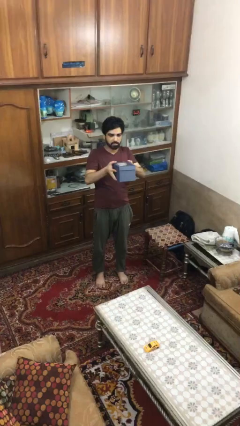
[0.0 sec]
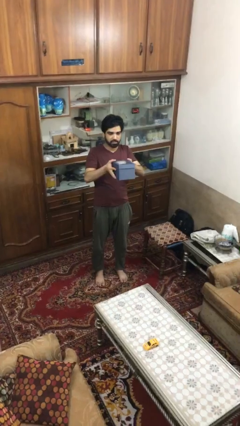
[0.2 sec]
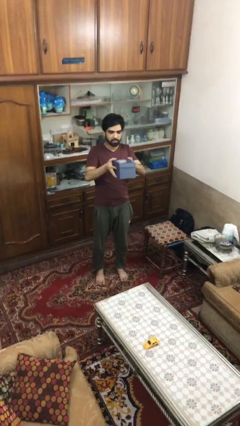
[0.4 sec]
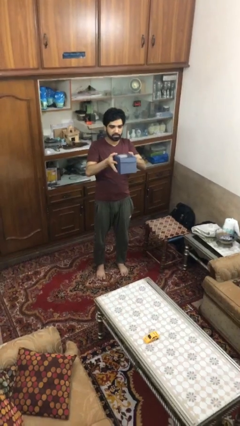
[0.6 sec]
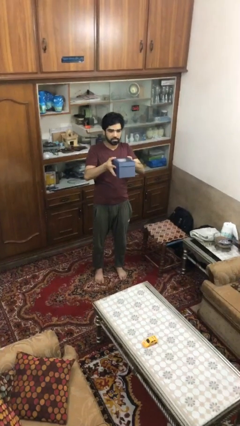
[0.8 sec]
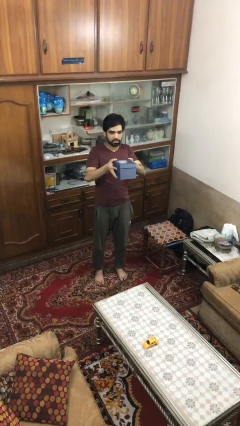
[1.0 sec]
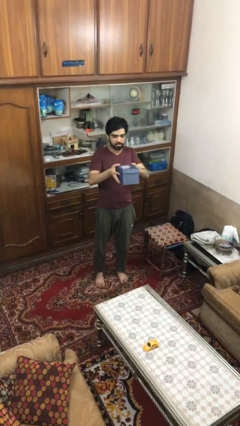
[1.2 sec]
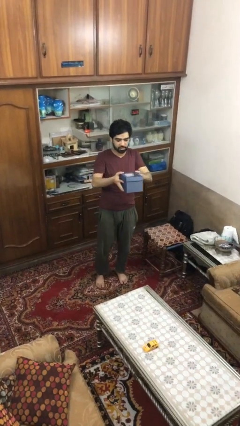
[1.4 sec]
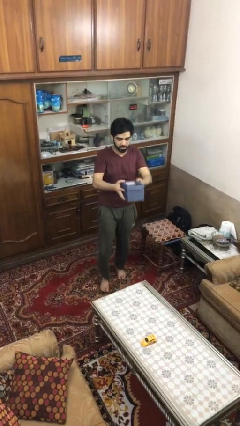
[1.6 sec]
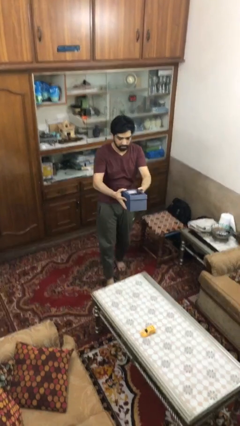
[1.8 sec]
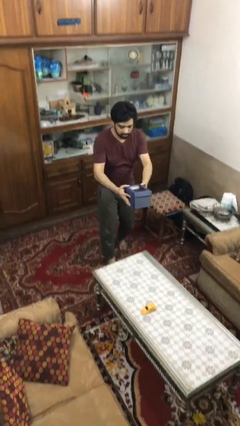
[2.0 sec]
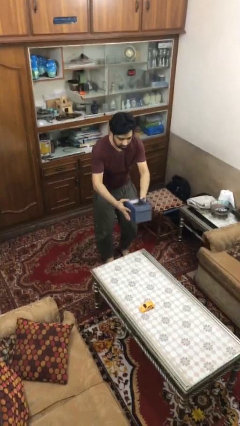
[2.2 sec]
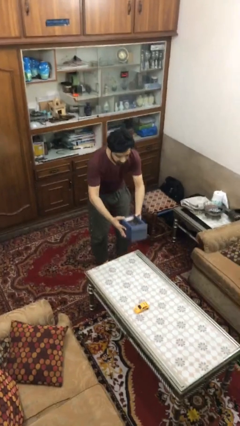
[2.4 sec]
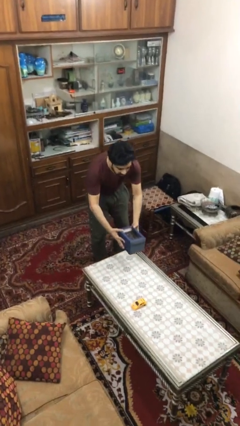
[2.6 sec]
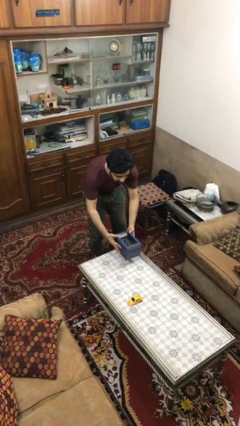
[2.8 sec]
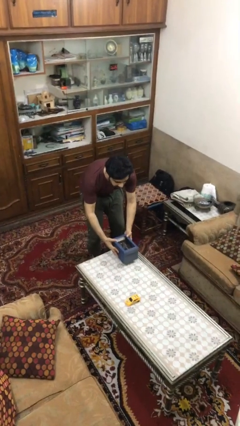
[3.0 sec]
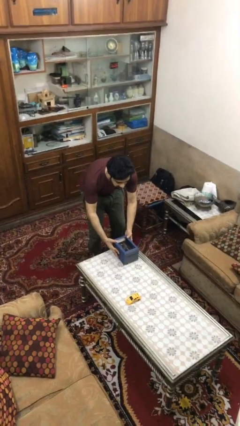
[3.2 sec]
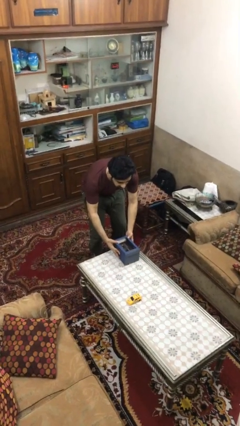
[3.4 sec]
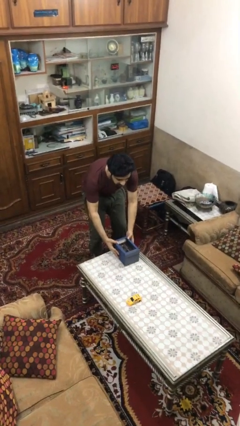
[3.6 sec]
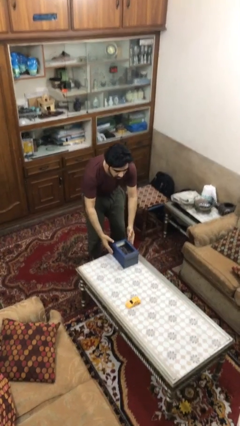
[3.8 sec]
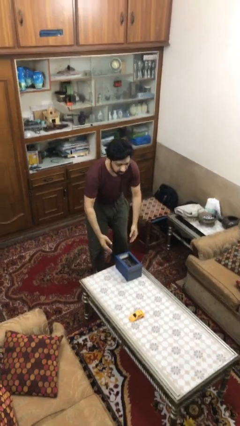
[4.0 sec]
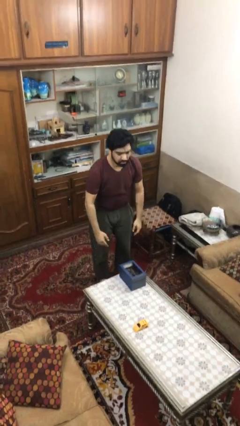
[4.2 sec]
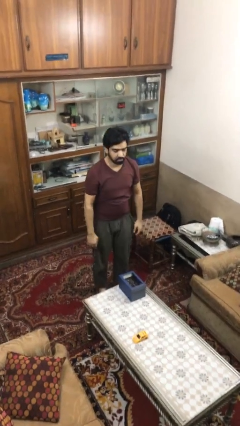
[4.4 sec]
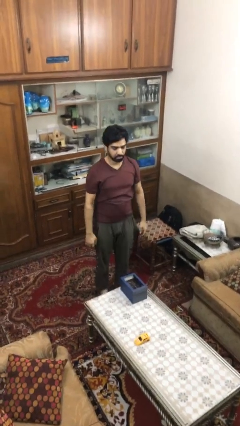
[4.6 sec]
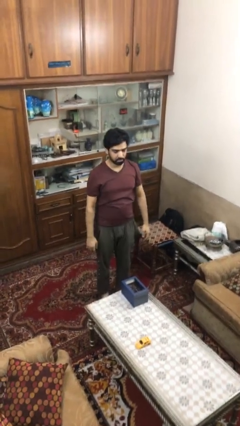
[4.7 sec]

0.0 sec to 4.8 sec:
person puts down object on table

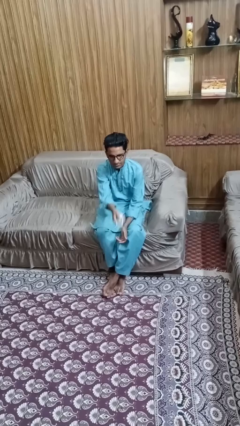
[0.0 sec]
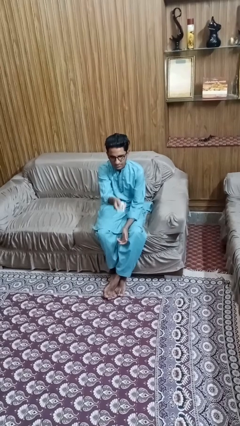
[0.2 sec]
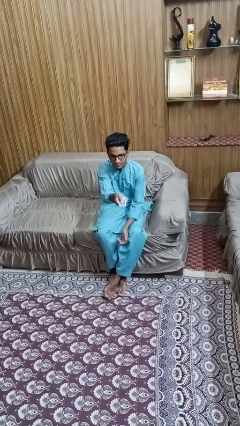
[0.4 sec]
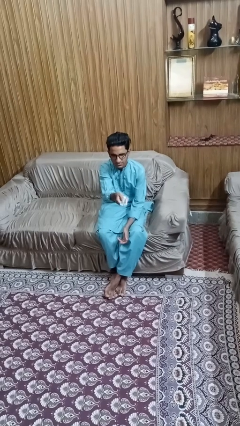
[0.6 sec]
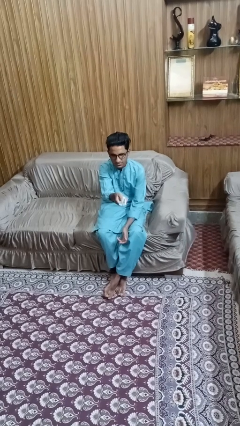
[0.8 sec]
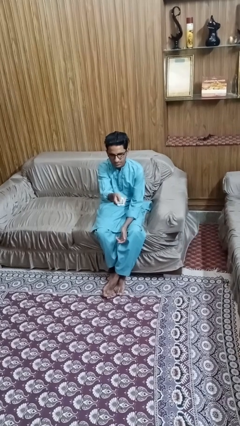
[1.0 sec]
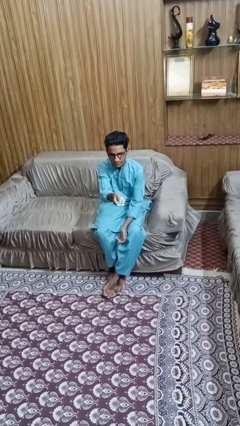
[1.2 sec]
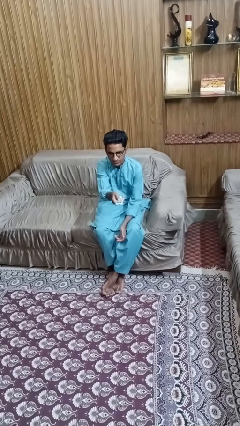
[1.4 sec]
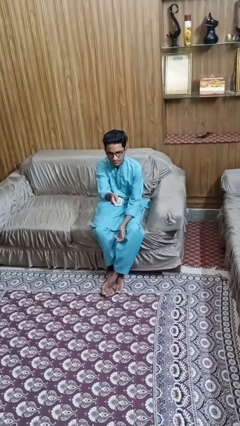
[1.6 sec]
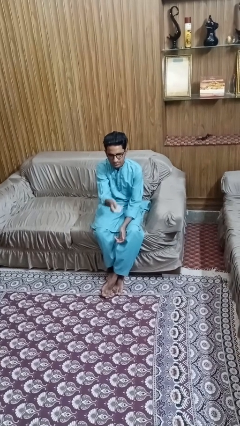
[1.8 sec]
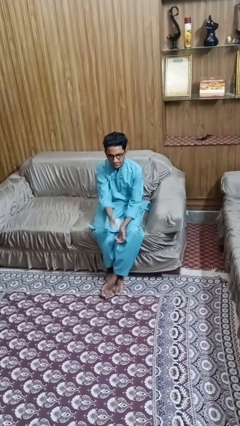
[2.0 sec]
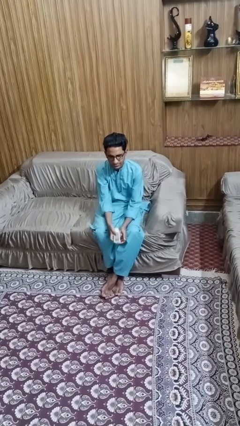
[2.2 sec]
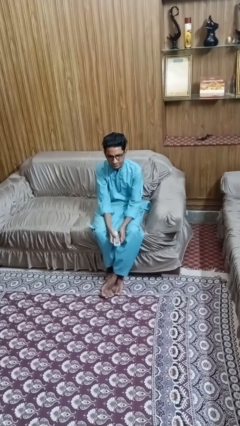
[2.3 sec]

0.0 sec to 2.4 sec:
person uses television remote

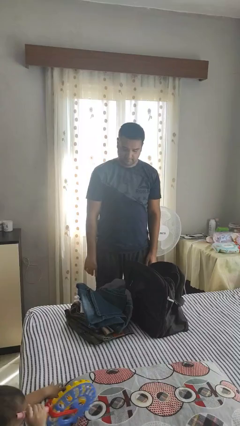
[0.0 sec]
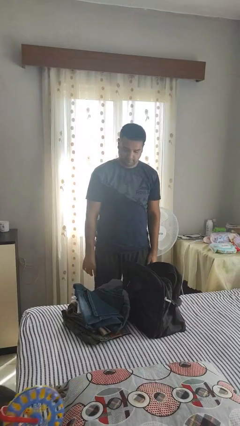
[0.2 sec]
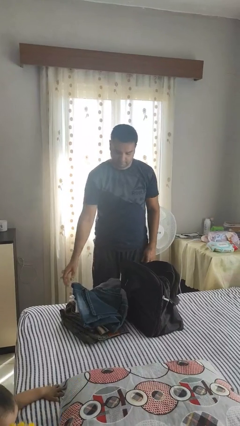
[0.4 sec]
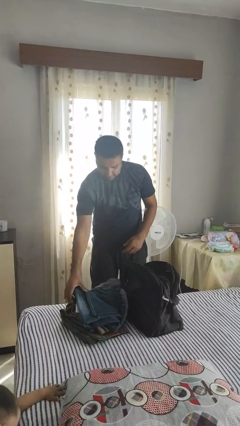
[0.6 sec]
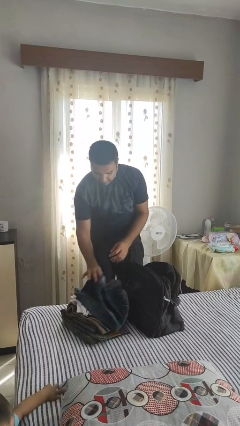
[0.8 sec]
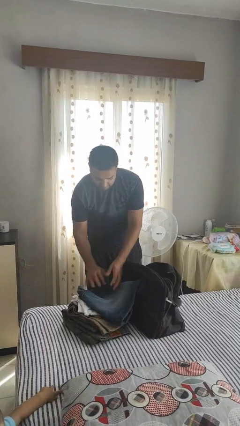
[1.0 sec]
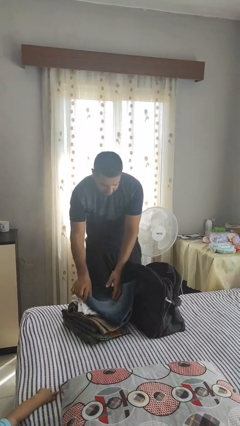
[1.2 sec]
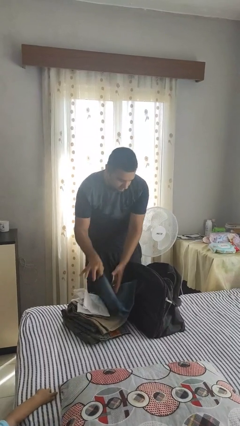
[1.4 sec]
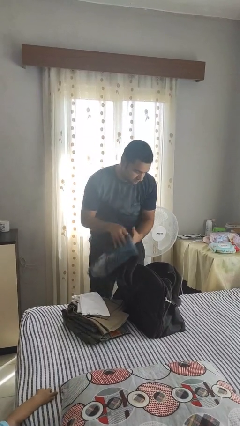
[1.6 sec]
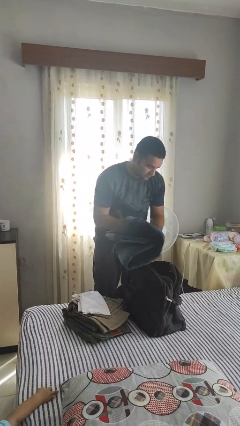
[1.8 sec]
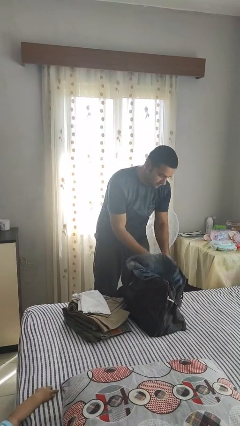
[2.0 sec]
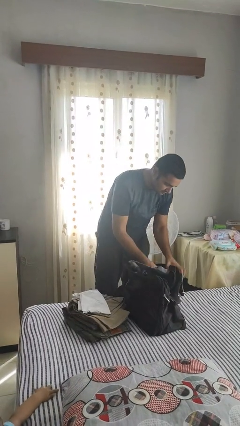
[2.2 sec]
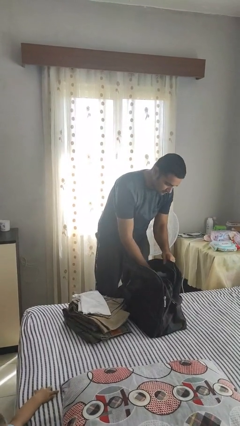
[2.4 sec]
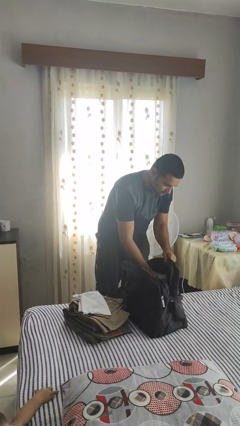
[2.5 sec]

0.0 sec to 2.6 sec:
person loads clothes into suitcase

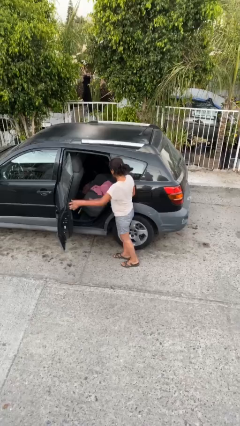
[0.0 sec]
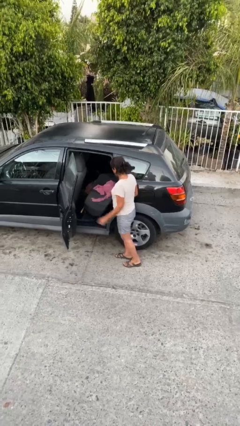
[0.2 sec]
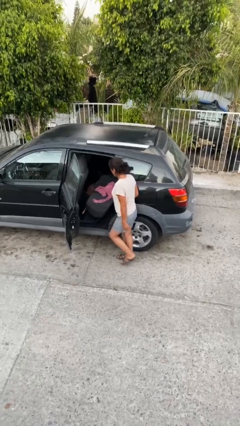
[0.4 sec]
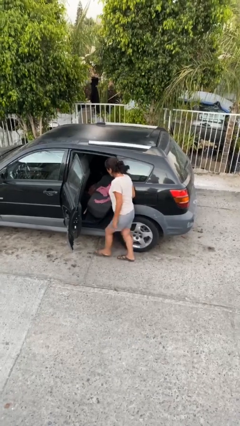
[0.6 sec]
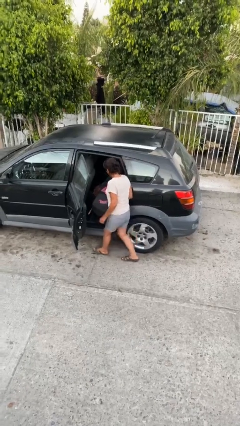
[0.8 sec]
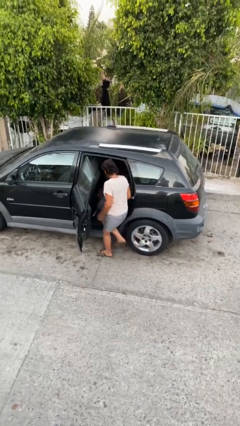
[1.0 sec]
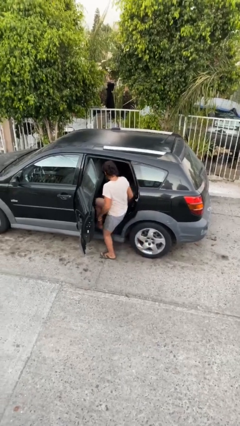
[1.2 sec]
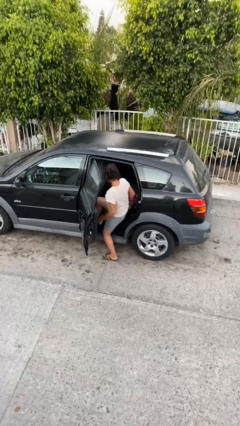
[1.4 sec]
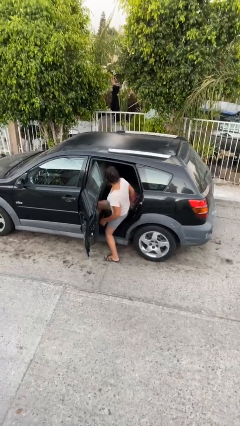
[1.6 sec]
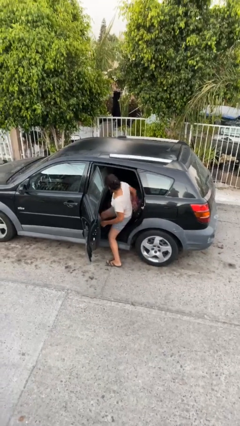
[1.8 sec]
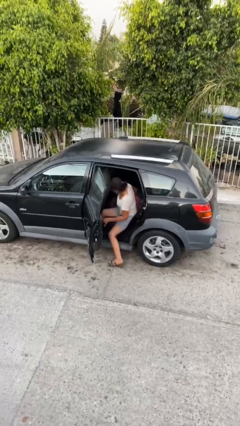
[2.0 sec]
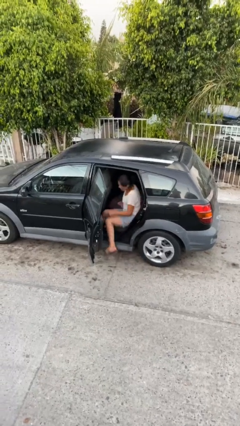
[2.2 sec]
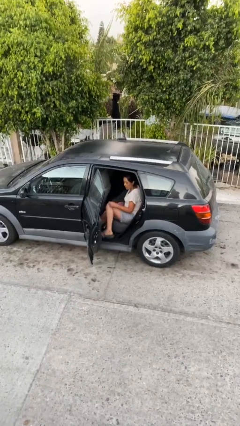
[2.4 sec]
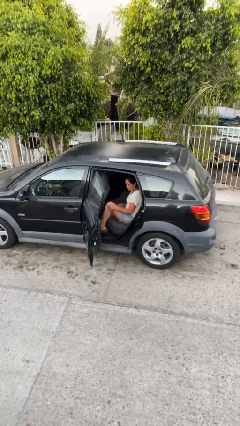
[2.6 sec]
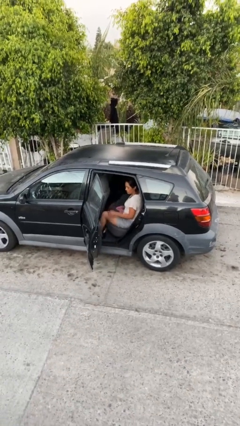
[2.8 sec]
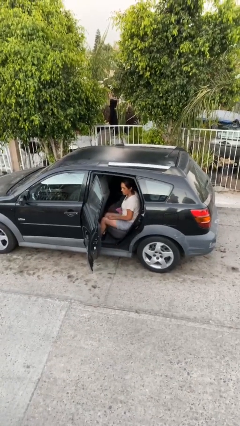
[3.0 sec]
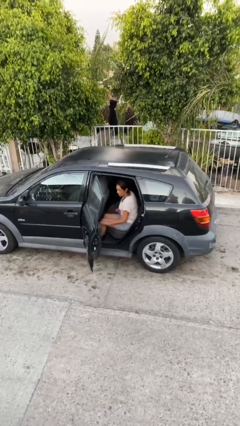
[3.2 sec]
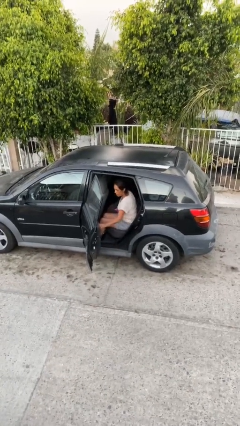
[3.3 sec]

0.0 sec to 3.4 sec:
person enters car

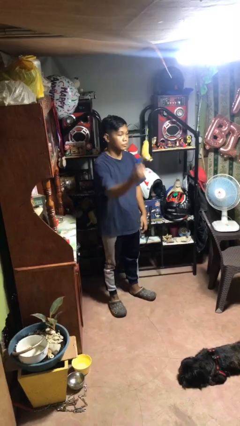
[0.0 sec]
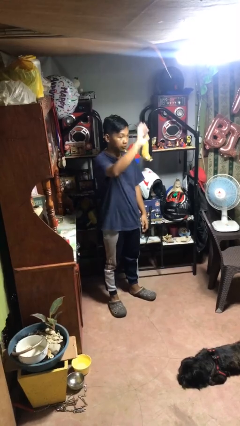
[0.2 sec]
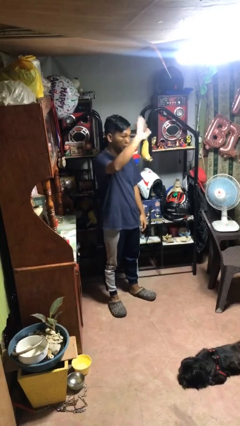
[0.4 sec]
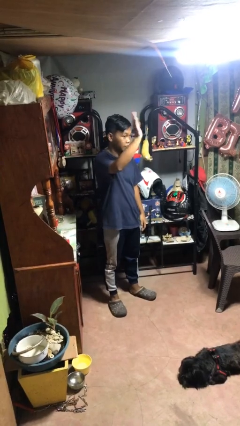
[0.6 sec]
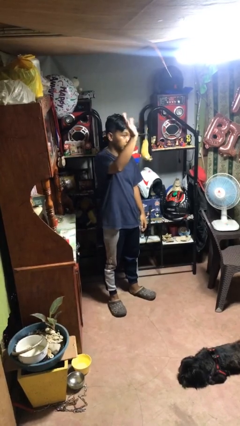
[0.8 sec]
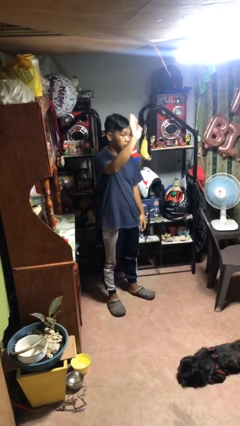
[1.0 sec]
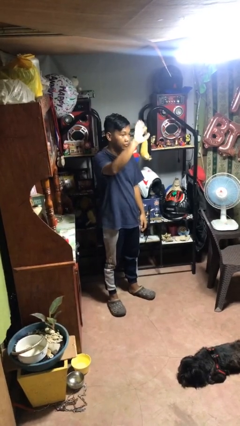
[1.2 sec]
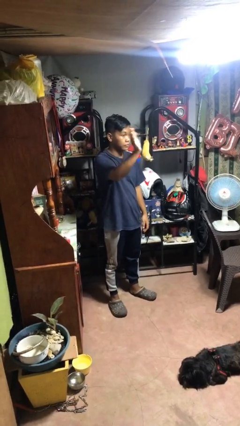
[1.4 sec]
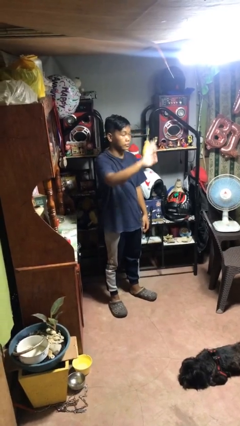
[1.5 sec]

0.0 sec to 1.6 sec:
person waves at person

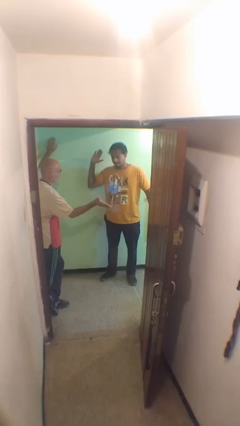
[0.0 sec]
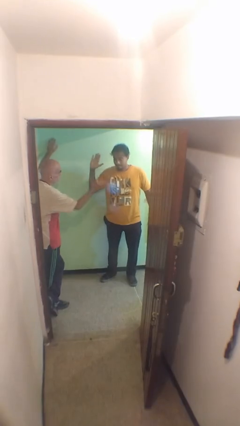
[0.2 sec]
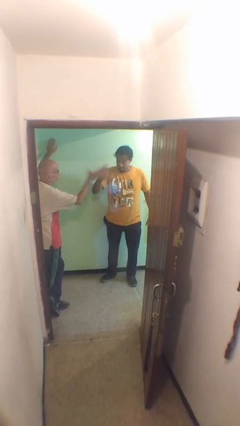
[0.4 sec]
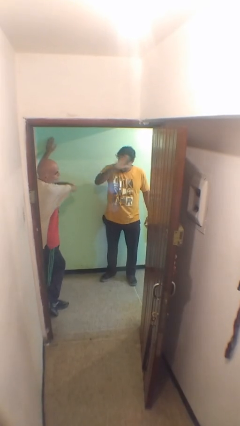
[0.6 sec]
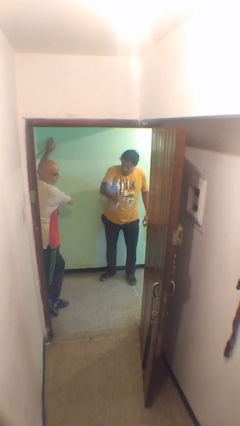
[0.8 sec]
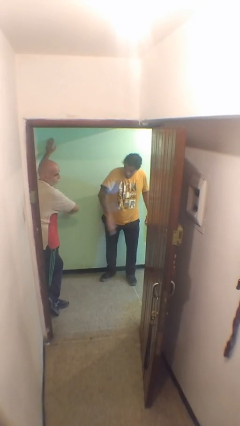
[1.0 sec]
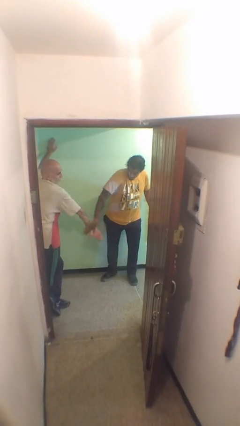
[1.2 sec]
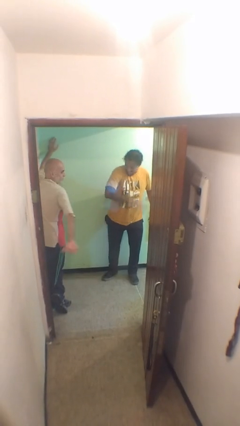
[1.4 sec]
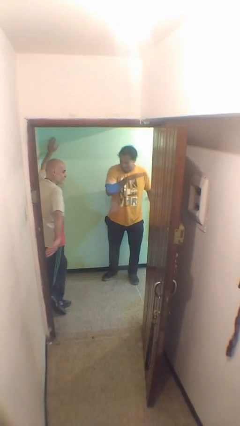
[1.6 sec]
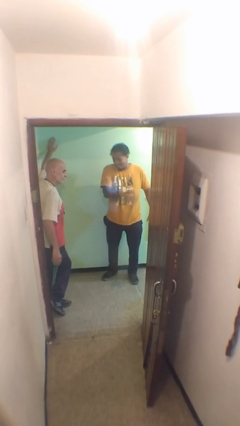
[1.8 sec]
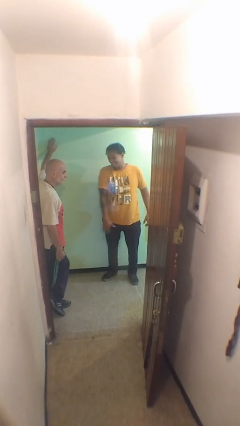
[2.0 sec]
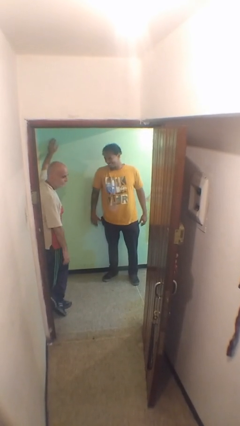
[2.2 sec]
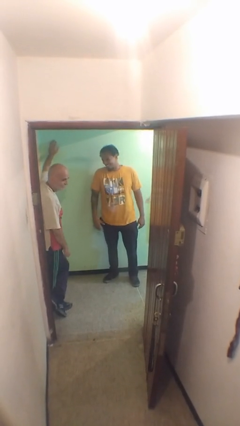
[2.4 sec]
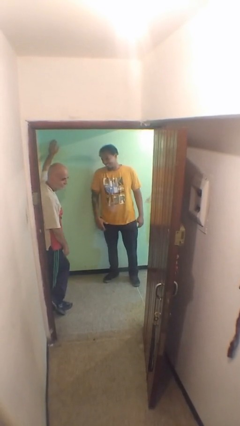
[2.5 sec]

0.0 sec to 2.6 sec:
person highfives hand
